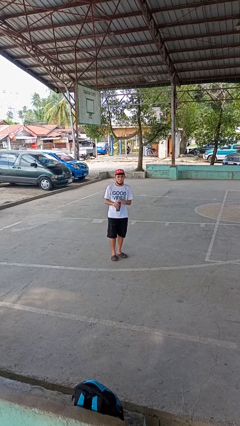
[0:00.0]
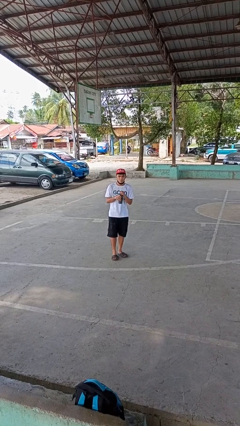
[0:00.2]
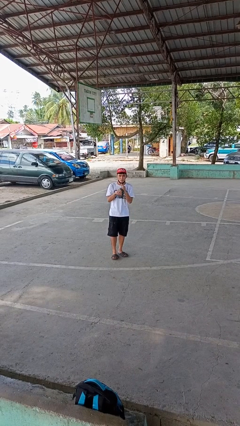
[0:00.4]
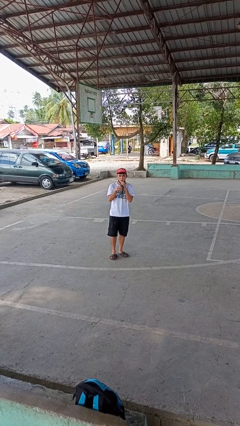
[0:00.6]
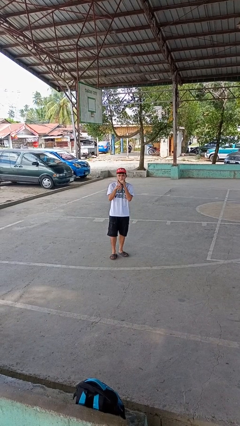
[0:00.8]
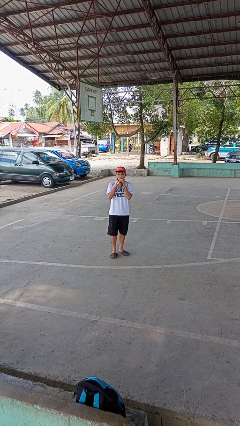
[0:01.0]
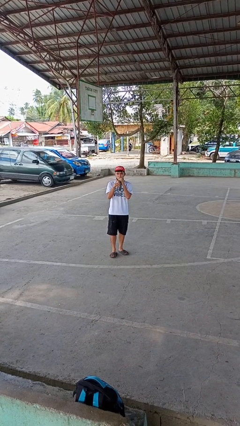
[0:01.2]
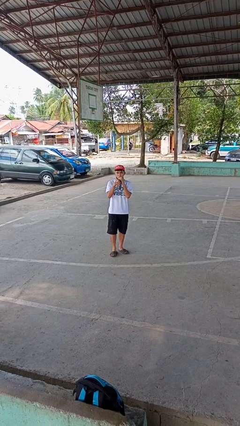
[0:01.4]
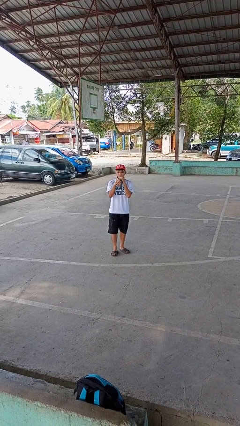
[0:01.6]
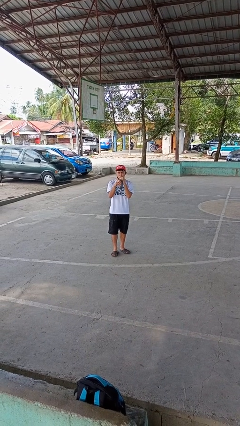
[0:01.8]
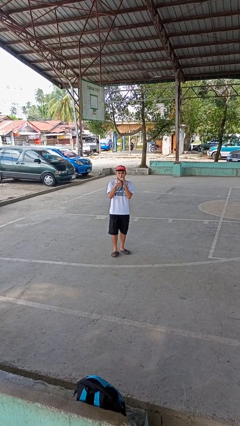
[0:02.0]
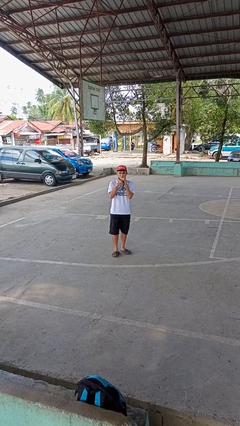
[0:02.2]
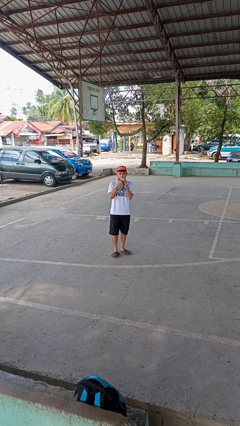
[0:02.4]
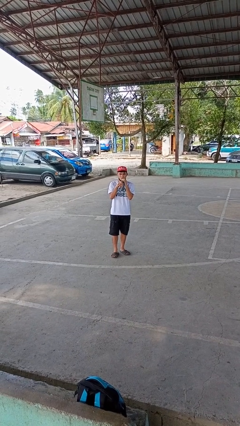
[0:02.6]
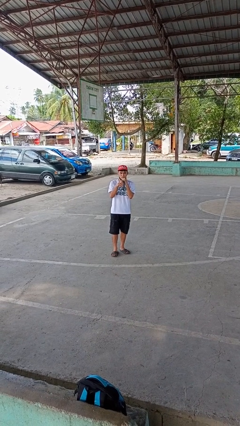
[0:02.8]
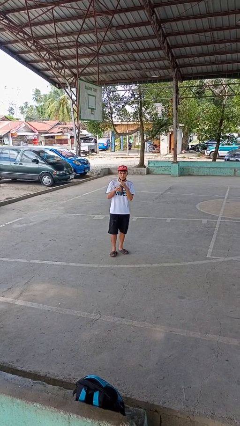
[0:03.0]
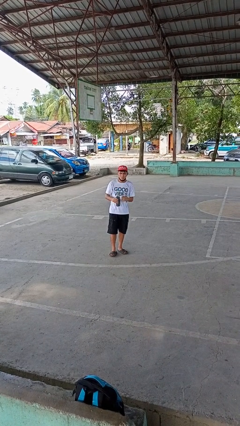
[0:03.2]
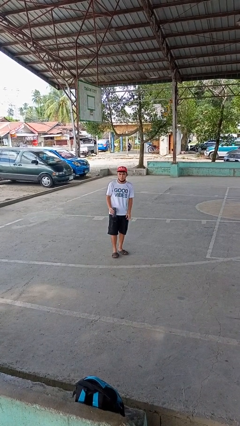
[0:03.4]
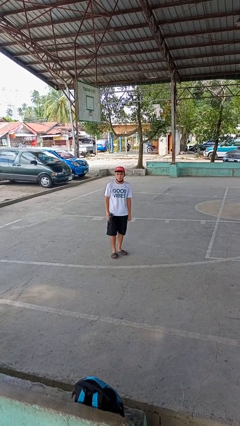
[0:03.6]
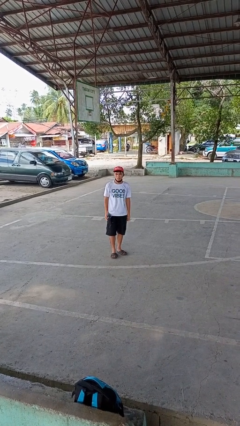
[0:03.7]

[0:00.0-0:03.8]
person drinks from straw

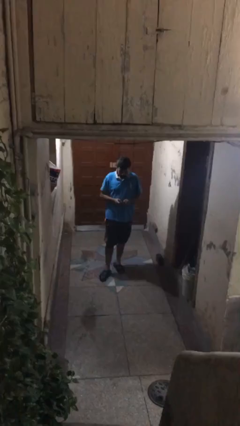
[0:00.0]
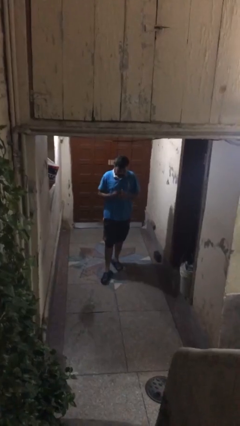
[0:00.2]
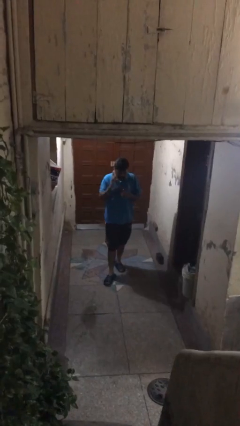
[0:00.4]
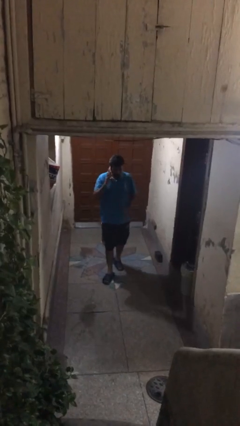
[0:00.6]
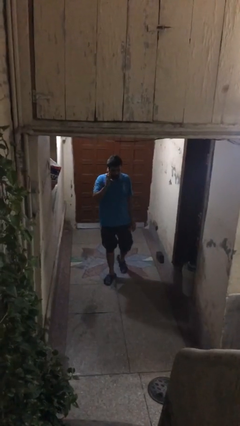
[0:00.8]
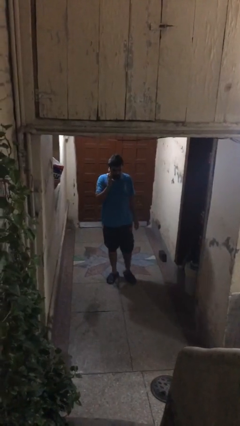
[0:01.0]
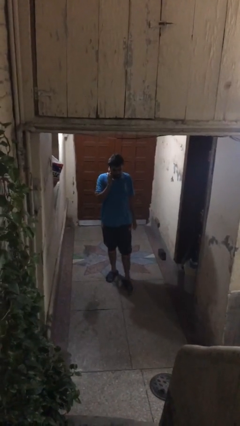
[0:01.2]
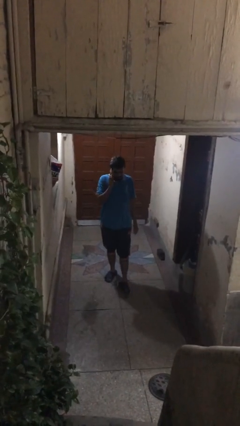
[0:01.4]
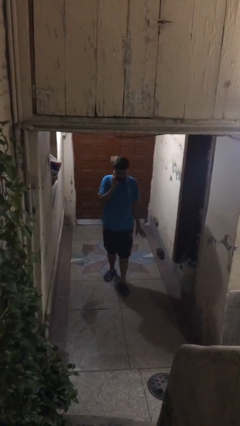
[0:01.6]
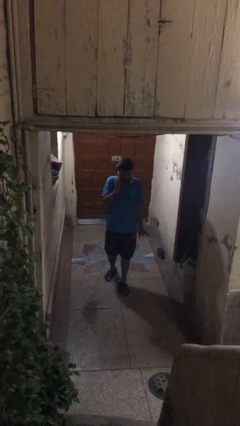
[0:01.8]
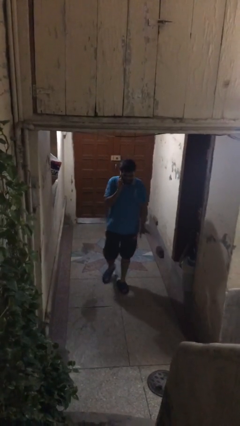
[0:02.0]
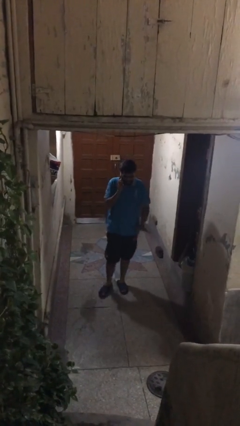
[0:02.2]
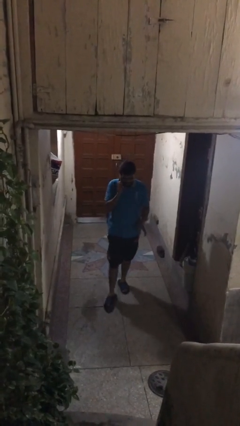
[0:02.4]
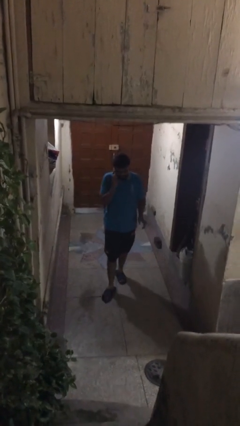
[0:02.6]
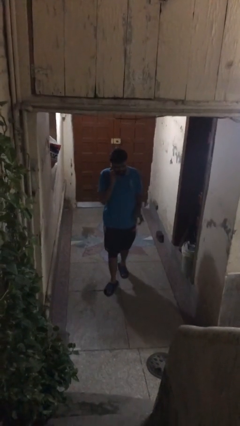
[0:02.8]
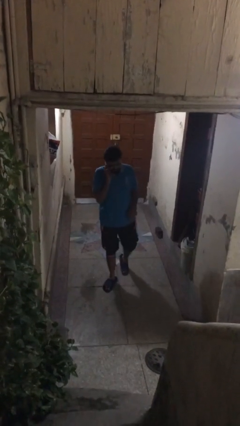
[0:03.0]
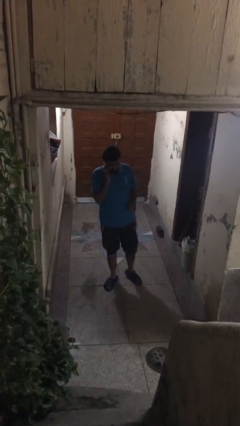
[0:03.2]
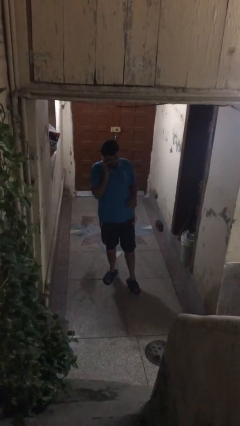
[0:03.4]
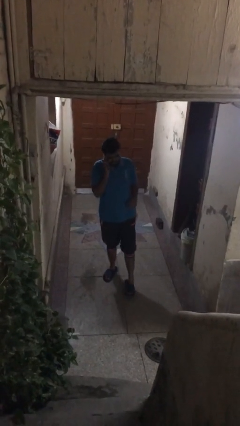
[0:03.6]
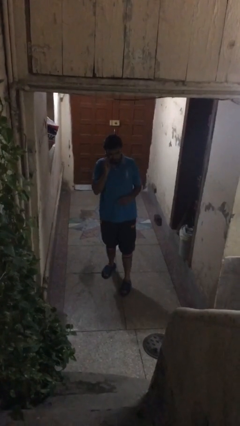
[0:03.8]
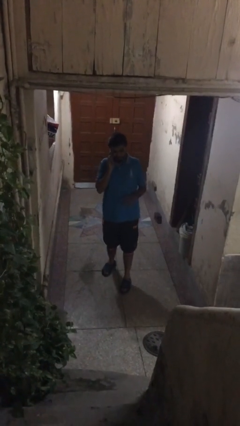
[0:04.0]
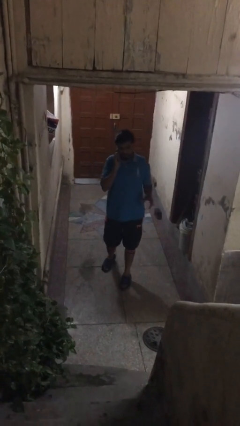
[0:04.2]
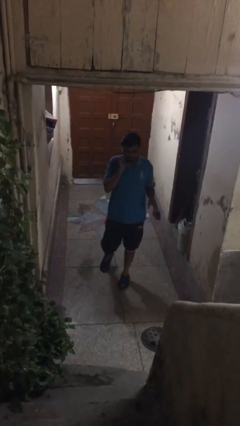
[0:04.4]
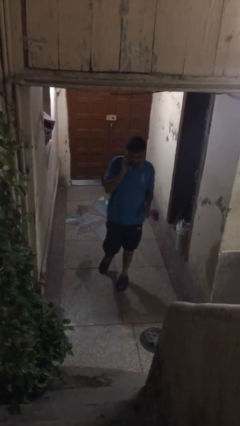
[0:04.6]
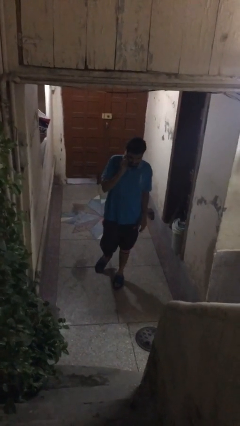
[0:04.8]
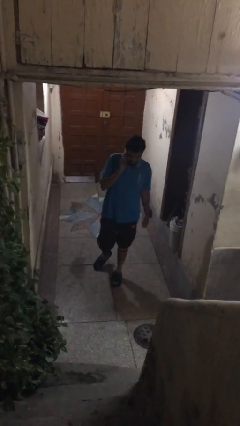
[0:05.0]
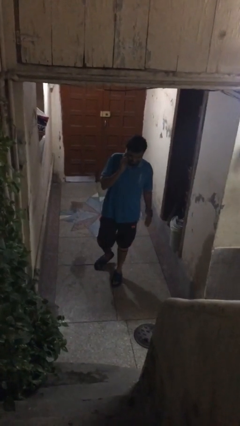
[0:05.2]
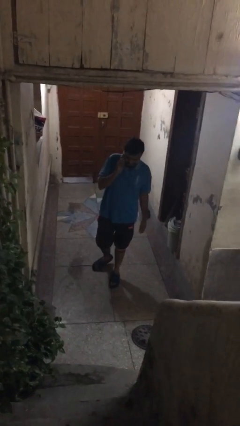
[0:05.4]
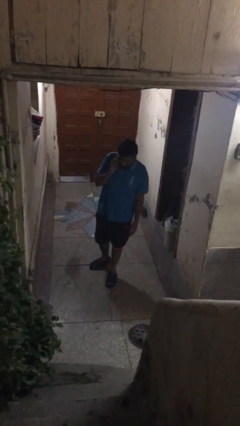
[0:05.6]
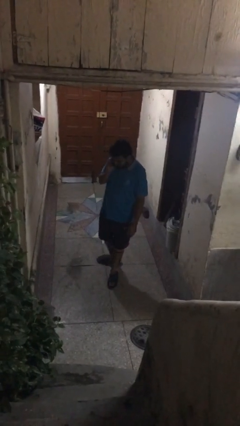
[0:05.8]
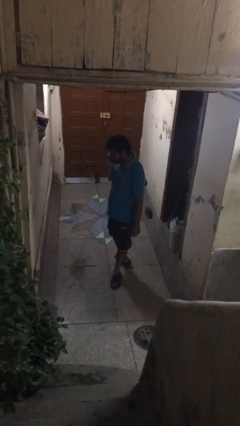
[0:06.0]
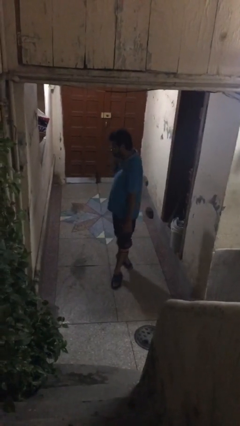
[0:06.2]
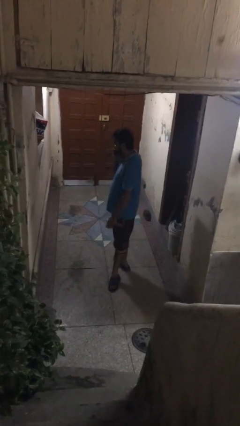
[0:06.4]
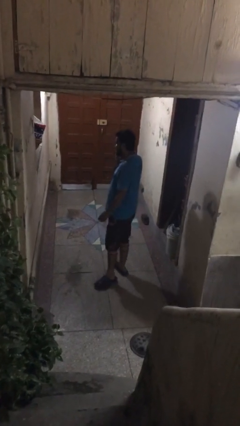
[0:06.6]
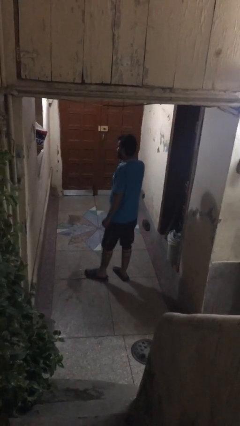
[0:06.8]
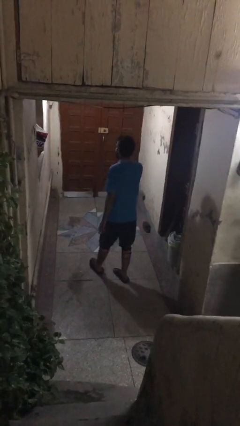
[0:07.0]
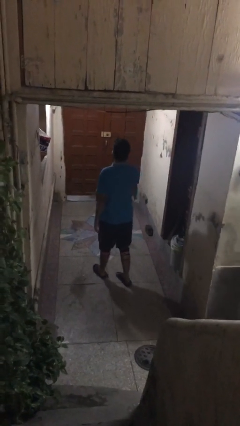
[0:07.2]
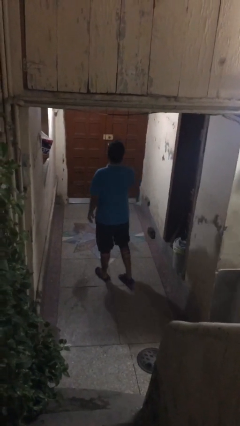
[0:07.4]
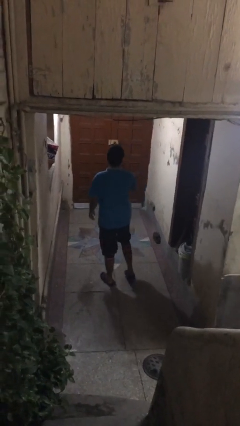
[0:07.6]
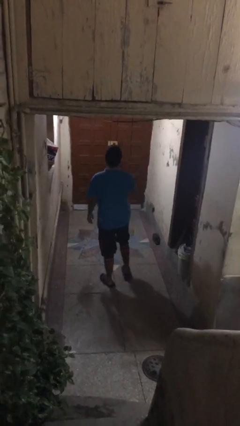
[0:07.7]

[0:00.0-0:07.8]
person talks on phone

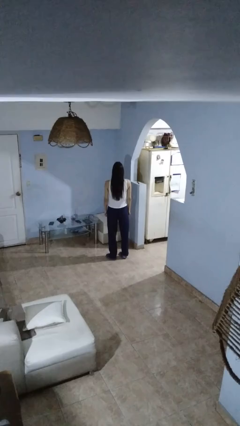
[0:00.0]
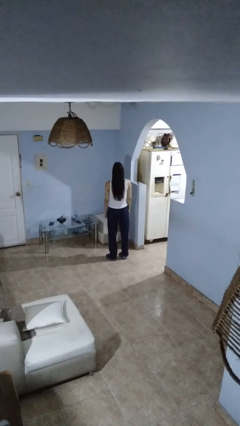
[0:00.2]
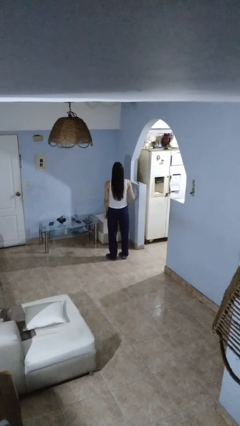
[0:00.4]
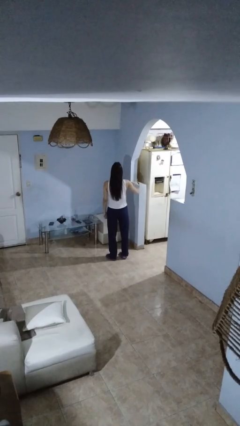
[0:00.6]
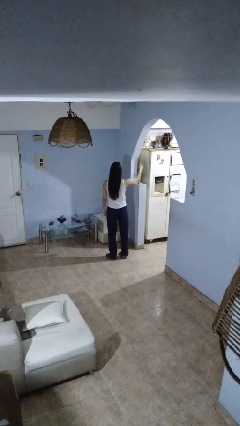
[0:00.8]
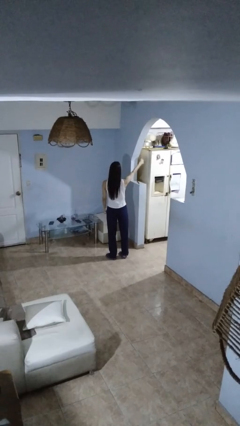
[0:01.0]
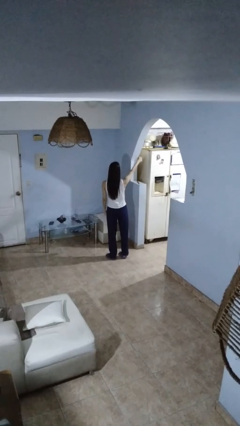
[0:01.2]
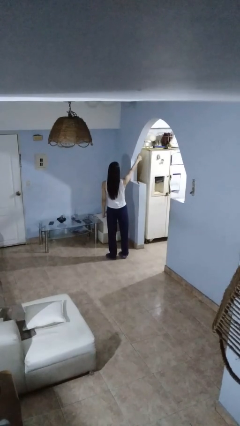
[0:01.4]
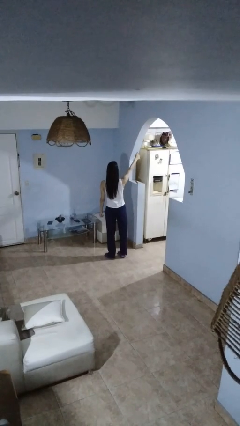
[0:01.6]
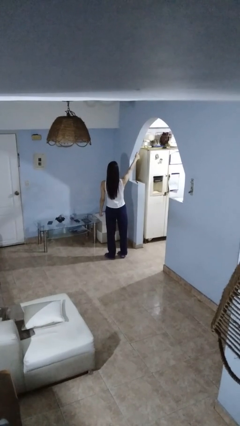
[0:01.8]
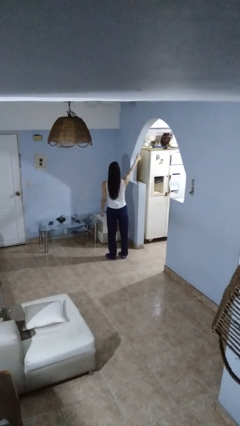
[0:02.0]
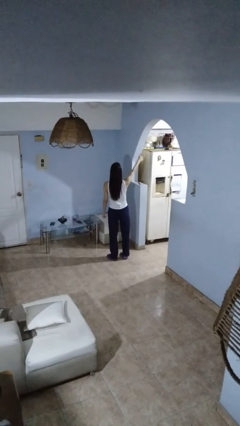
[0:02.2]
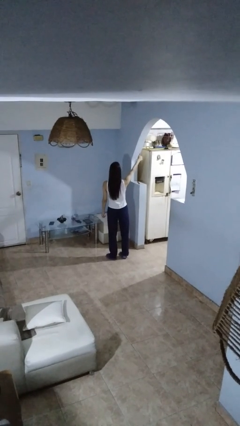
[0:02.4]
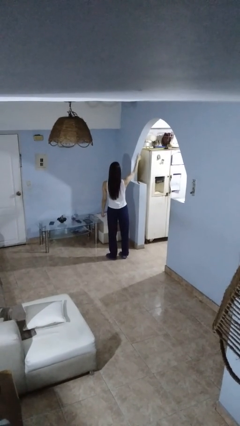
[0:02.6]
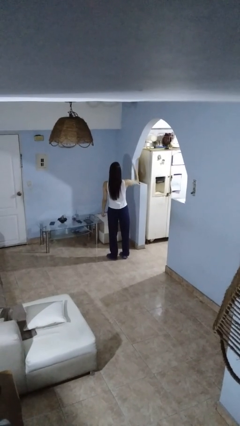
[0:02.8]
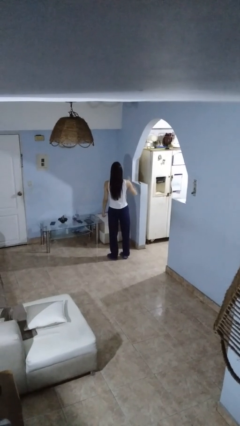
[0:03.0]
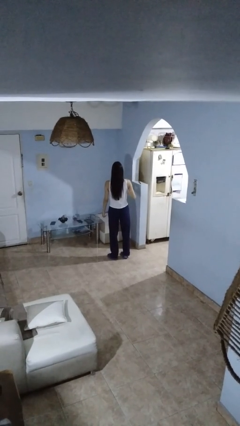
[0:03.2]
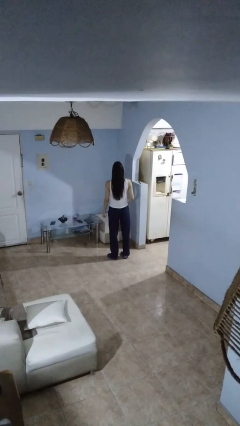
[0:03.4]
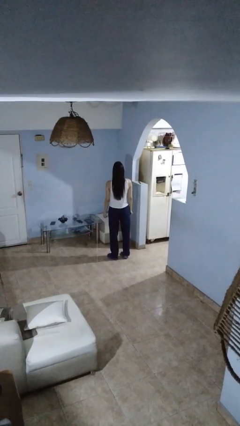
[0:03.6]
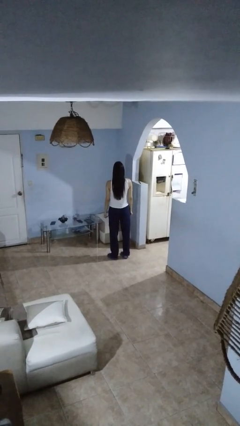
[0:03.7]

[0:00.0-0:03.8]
person gestures thumbs up

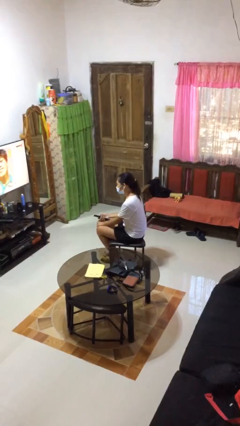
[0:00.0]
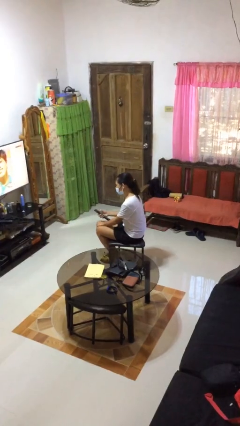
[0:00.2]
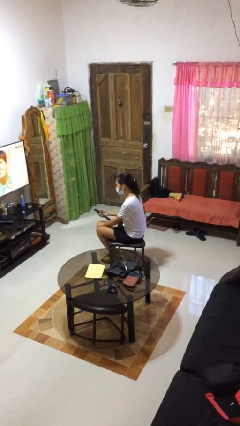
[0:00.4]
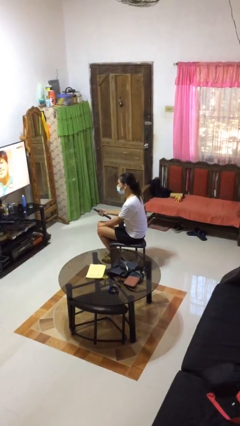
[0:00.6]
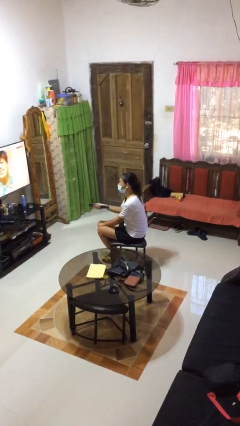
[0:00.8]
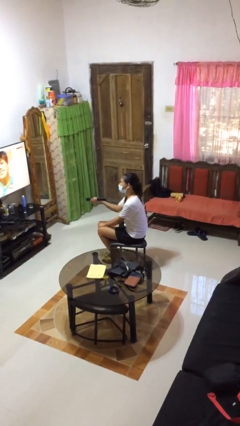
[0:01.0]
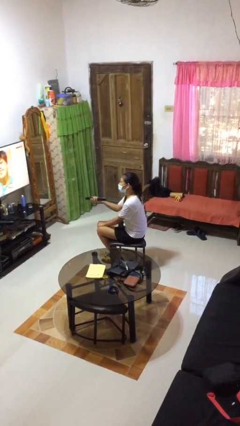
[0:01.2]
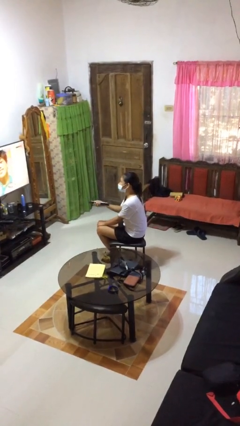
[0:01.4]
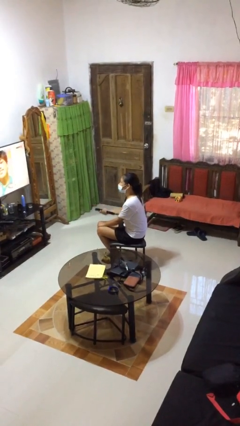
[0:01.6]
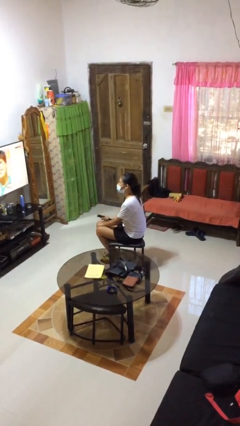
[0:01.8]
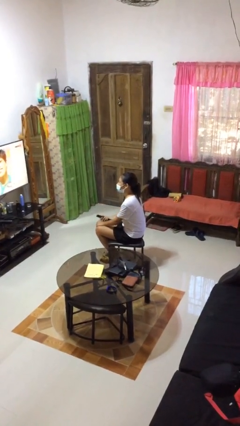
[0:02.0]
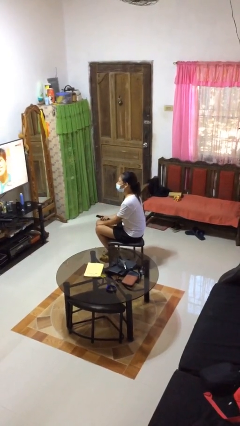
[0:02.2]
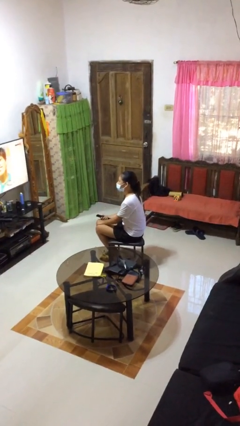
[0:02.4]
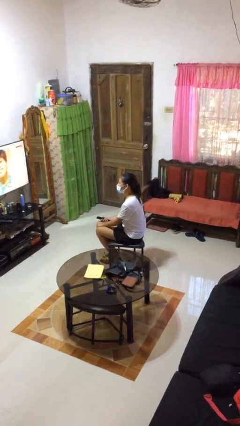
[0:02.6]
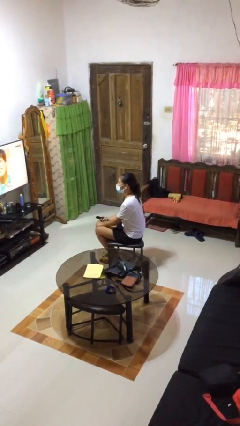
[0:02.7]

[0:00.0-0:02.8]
person uses television remote

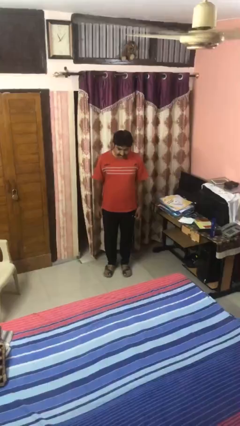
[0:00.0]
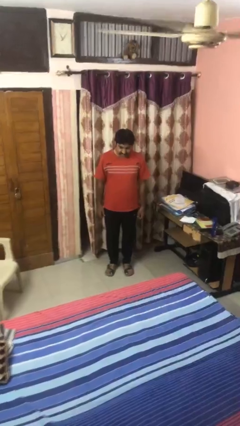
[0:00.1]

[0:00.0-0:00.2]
person stands up
